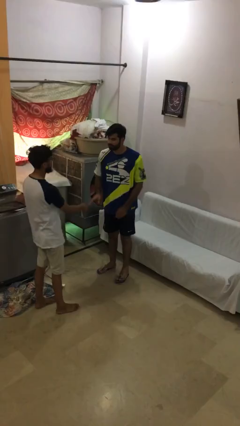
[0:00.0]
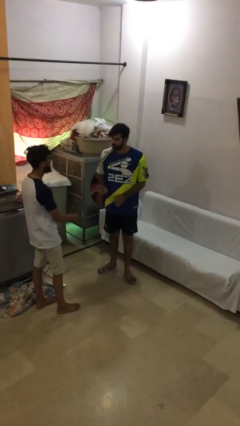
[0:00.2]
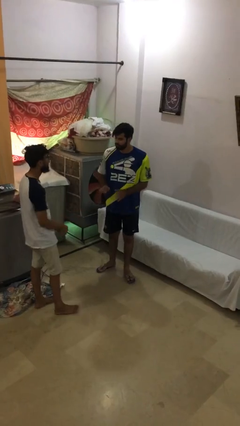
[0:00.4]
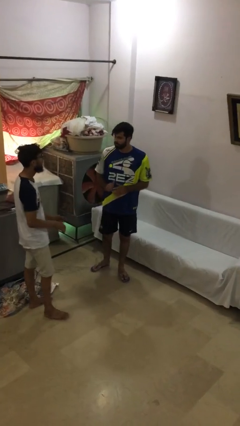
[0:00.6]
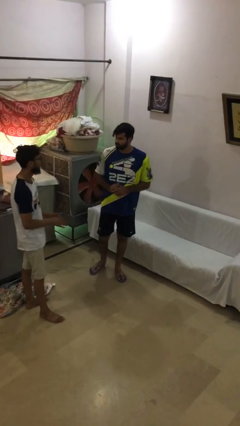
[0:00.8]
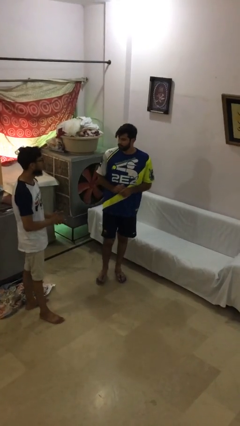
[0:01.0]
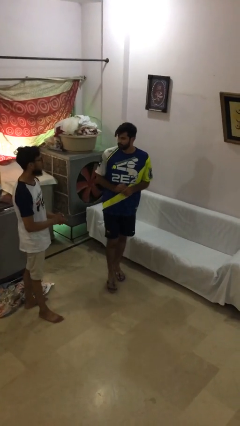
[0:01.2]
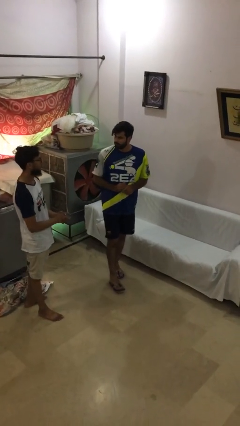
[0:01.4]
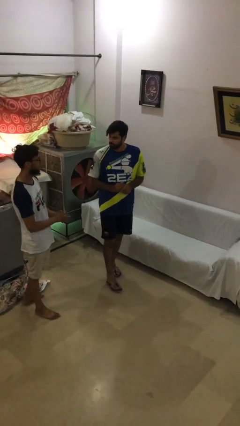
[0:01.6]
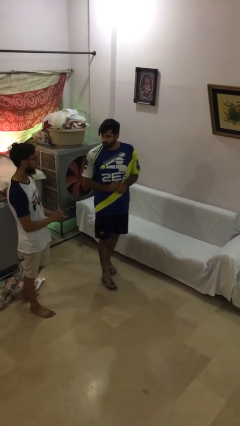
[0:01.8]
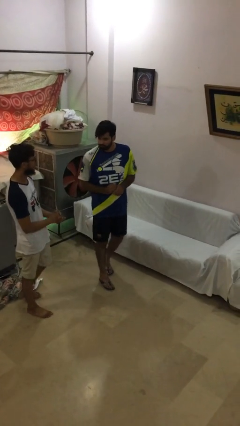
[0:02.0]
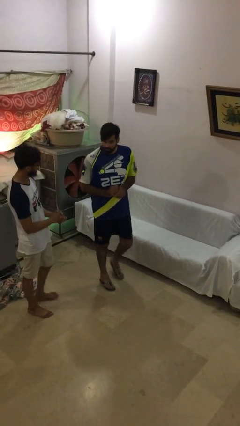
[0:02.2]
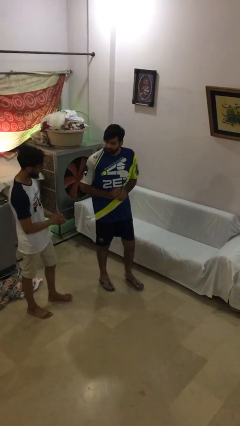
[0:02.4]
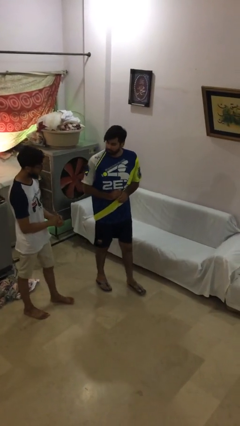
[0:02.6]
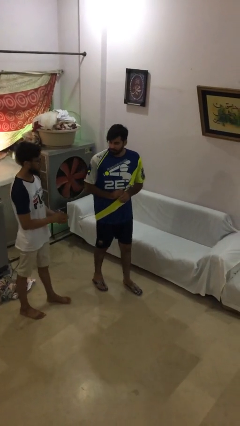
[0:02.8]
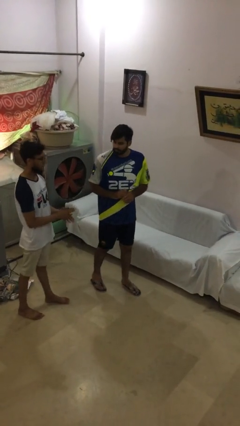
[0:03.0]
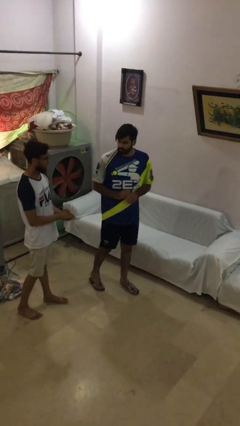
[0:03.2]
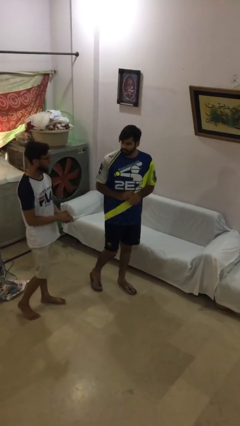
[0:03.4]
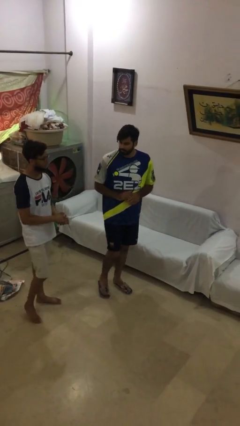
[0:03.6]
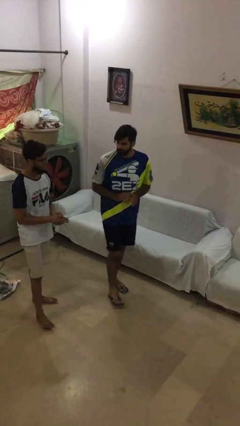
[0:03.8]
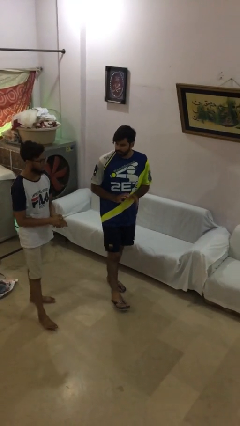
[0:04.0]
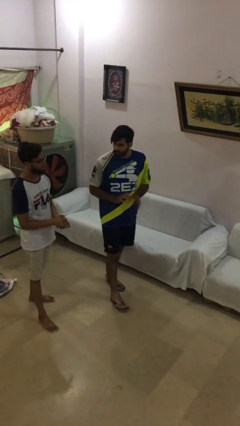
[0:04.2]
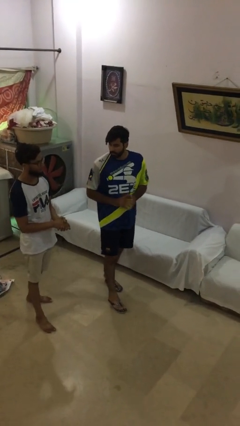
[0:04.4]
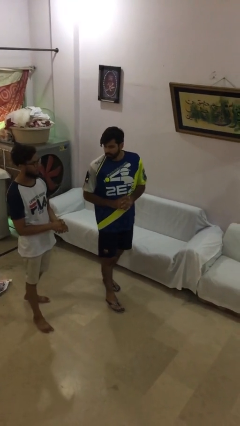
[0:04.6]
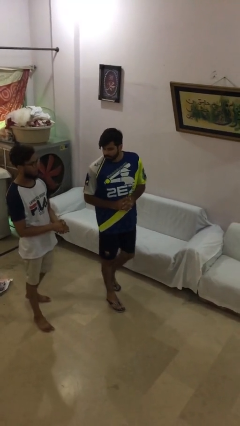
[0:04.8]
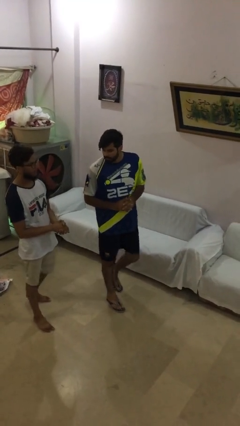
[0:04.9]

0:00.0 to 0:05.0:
person talks to person

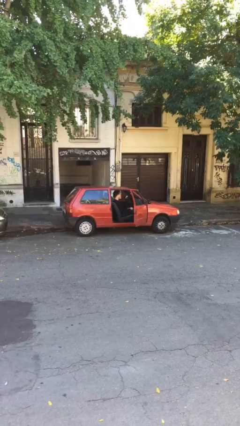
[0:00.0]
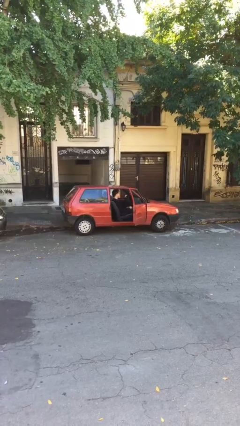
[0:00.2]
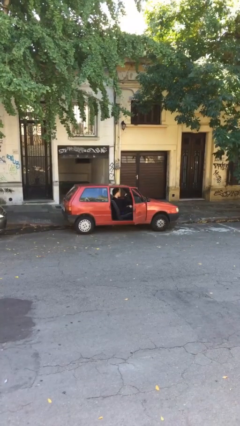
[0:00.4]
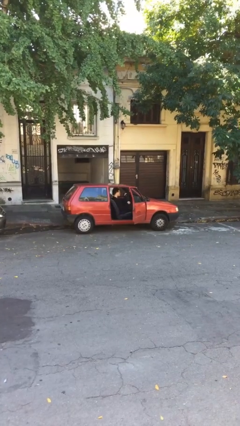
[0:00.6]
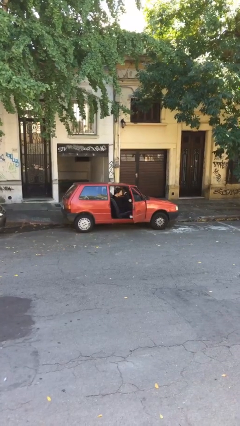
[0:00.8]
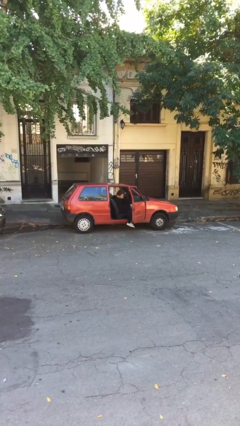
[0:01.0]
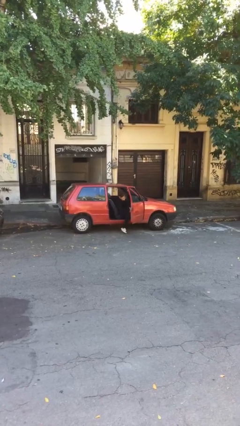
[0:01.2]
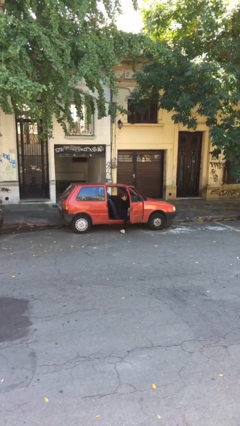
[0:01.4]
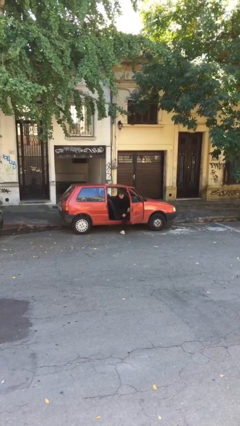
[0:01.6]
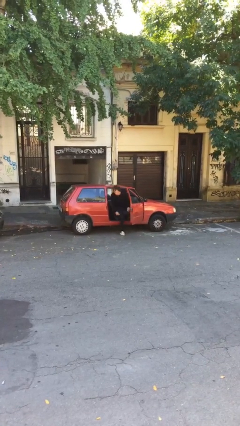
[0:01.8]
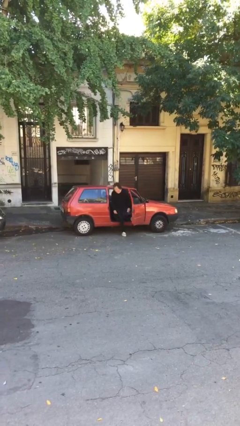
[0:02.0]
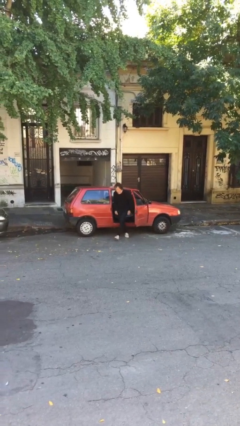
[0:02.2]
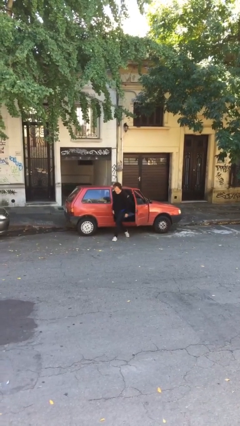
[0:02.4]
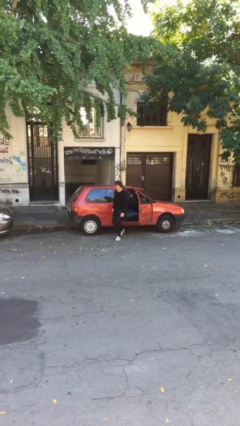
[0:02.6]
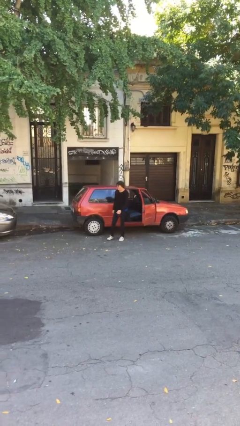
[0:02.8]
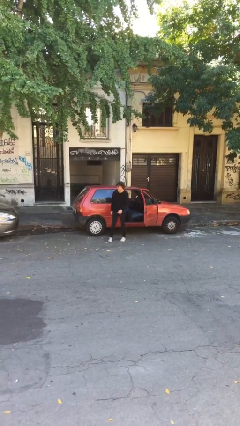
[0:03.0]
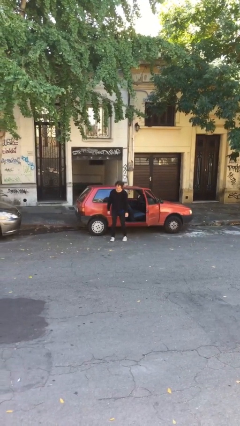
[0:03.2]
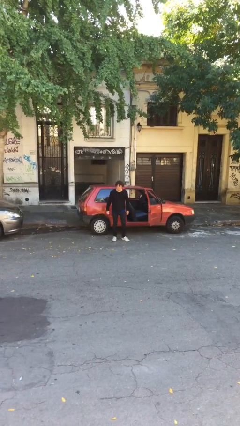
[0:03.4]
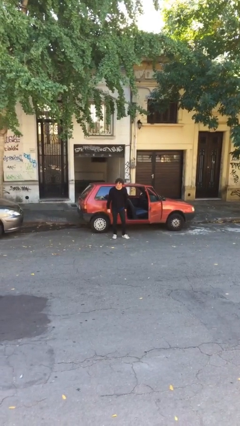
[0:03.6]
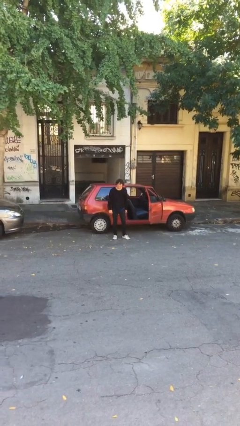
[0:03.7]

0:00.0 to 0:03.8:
person exits car

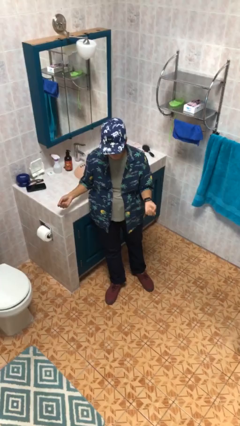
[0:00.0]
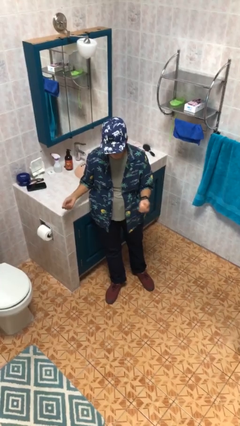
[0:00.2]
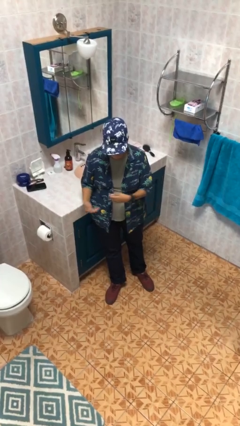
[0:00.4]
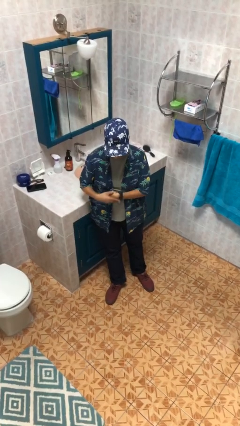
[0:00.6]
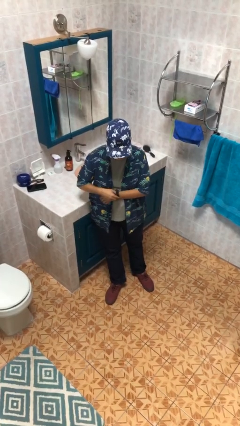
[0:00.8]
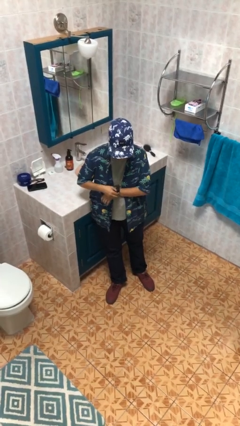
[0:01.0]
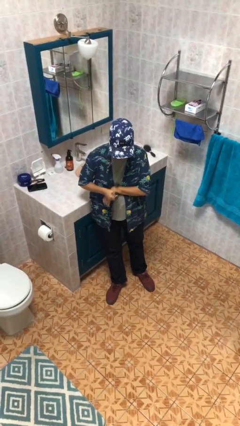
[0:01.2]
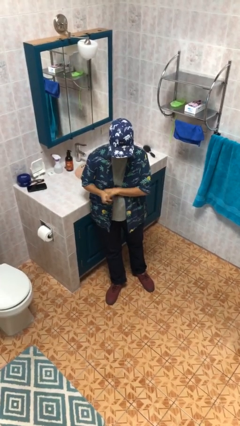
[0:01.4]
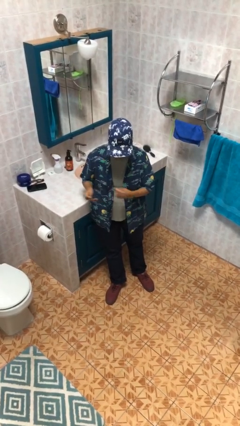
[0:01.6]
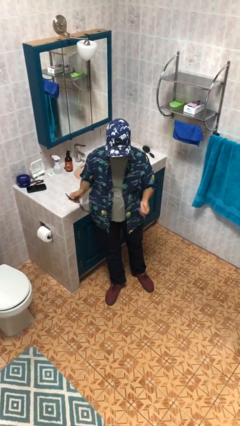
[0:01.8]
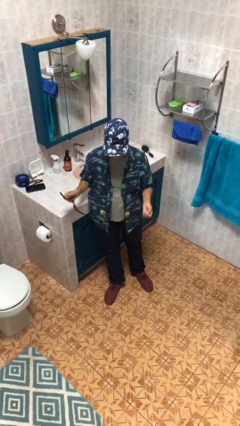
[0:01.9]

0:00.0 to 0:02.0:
person takes off wristwatch

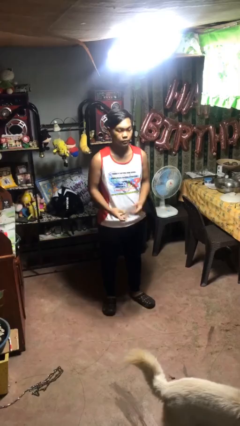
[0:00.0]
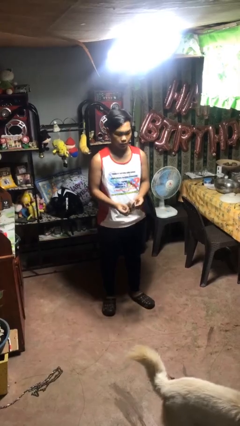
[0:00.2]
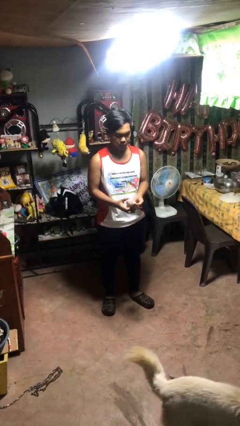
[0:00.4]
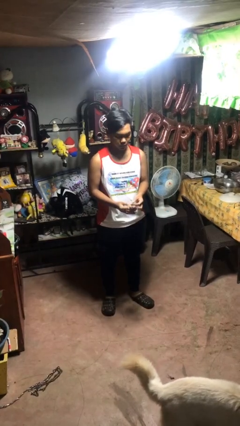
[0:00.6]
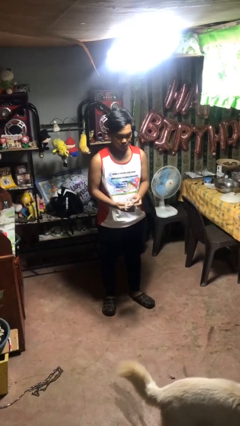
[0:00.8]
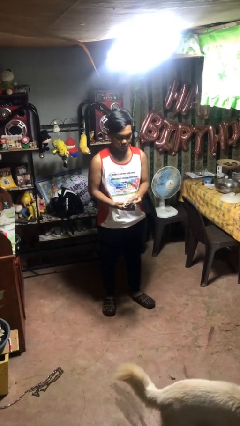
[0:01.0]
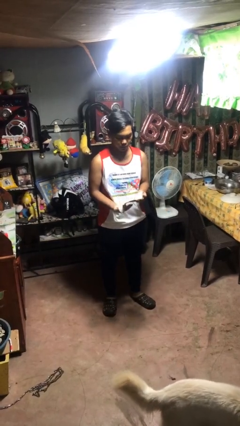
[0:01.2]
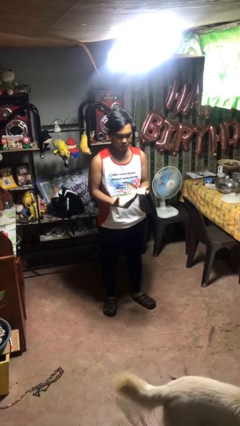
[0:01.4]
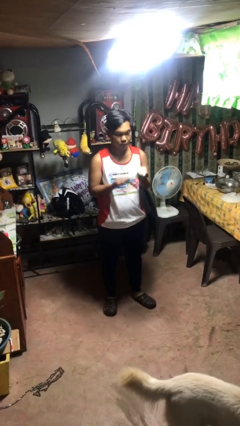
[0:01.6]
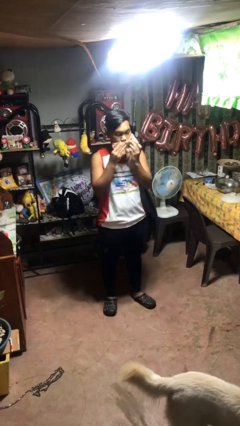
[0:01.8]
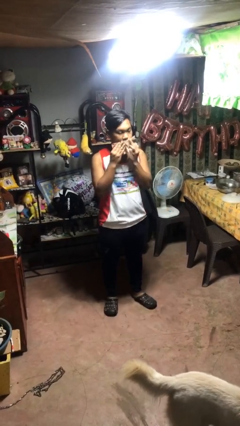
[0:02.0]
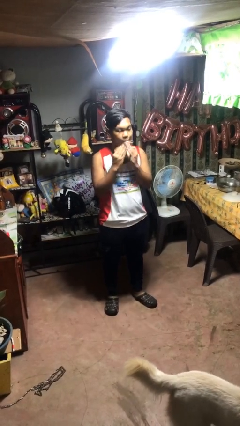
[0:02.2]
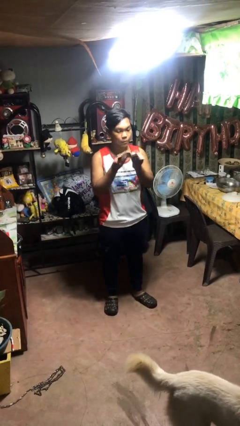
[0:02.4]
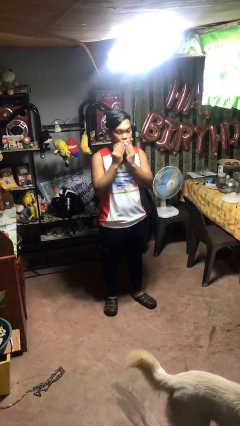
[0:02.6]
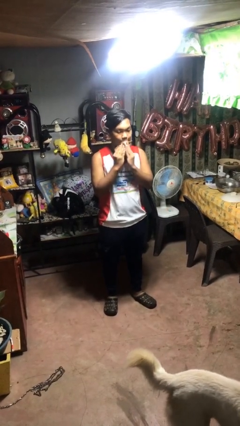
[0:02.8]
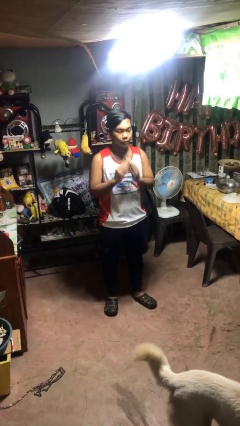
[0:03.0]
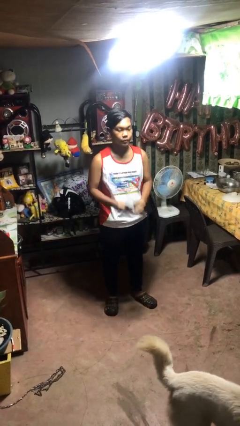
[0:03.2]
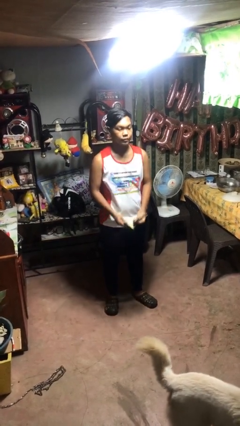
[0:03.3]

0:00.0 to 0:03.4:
person wipes mouth with napkin

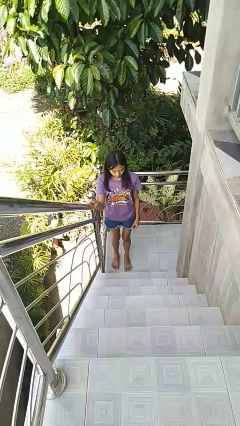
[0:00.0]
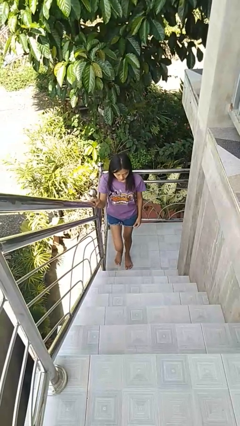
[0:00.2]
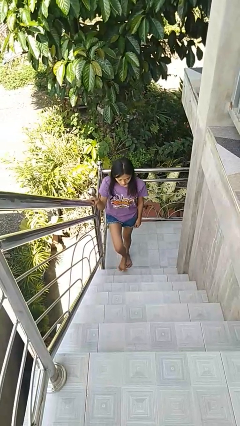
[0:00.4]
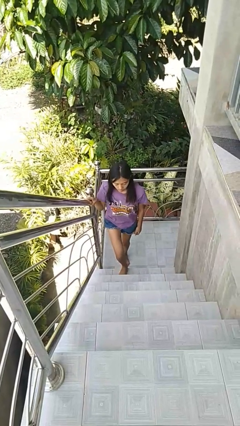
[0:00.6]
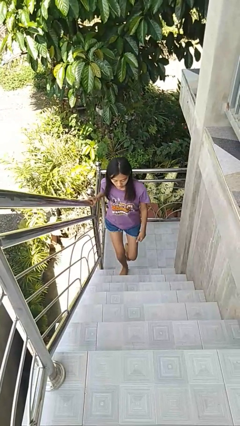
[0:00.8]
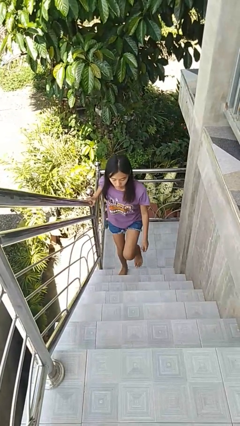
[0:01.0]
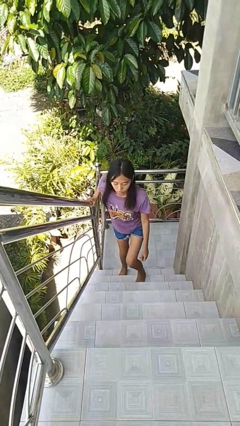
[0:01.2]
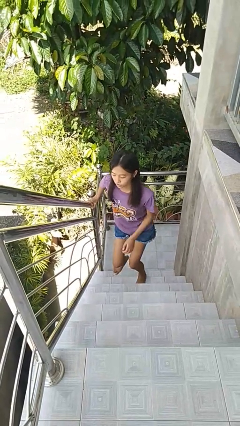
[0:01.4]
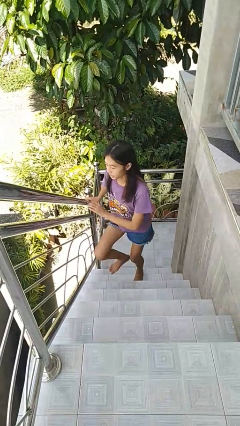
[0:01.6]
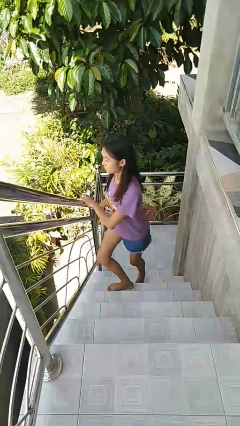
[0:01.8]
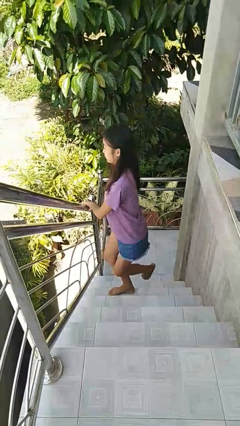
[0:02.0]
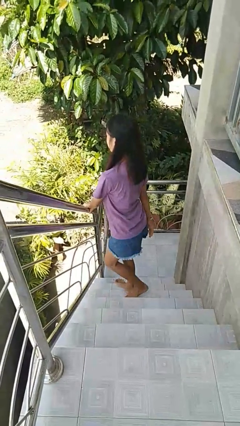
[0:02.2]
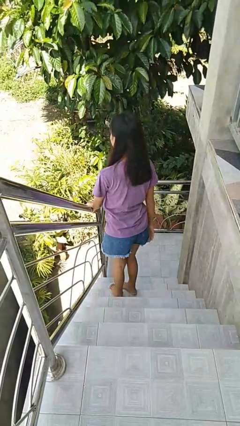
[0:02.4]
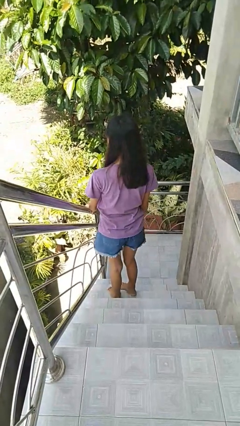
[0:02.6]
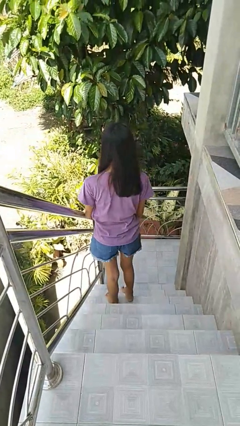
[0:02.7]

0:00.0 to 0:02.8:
person climbs up stairs

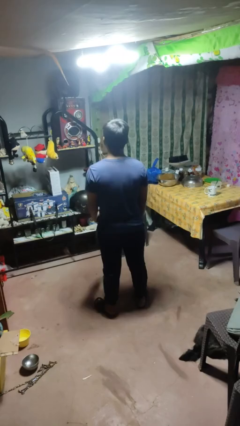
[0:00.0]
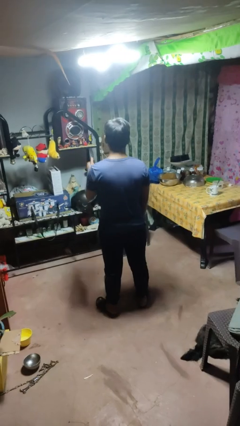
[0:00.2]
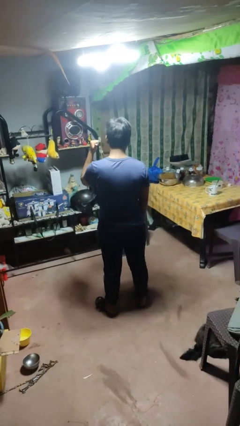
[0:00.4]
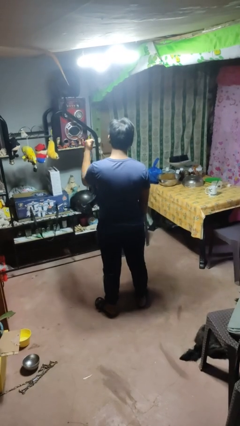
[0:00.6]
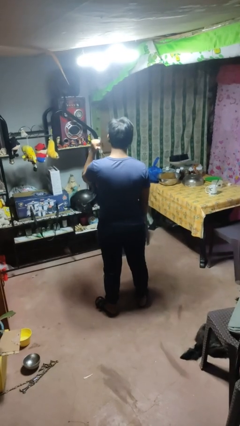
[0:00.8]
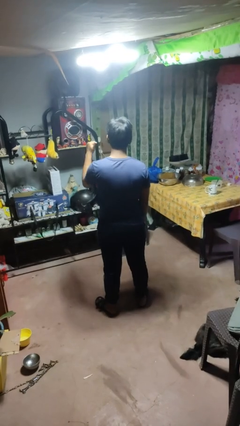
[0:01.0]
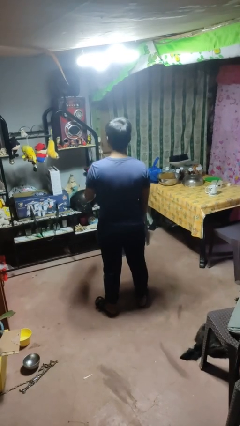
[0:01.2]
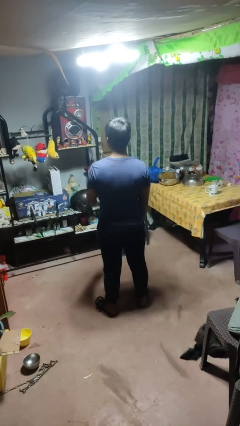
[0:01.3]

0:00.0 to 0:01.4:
person gestures behind me
